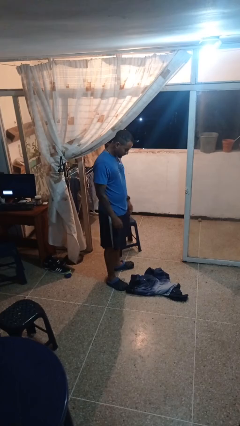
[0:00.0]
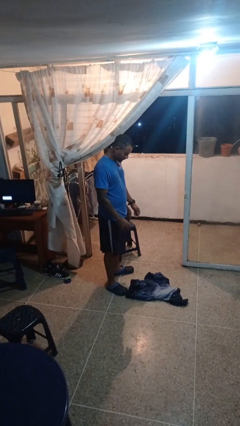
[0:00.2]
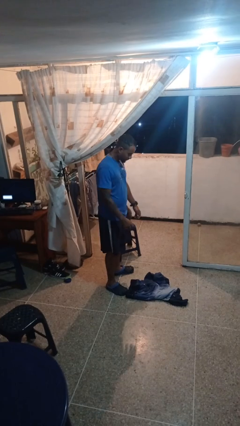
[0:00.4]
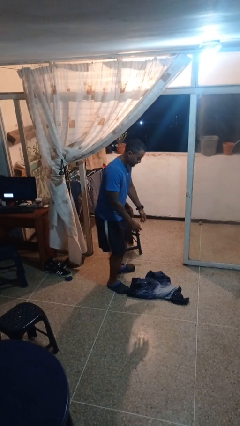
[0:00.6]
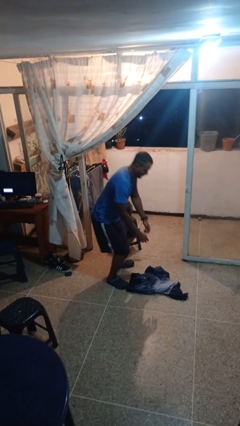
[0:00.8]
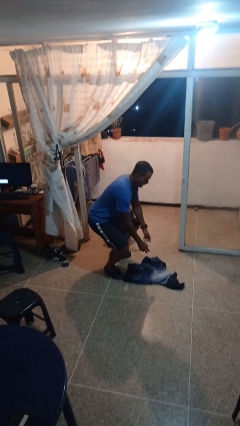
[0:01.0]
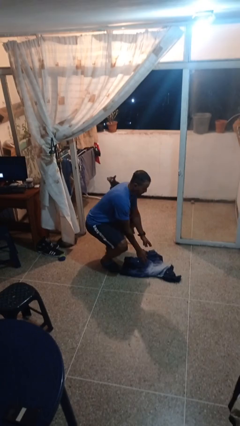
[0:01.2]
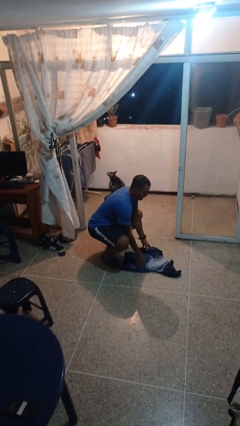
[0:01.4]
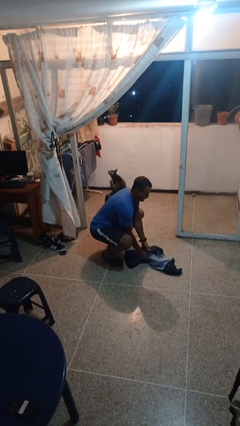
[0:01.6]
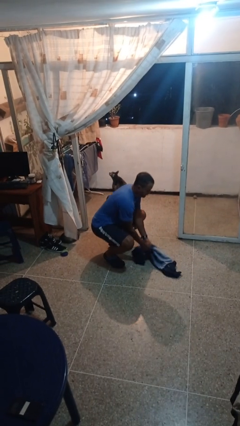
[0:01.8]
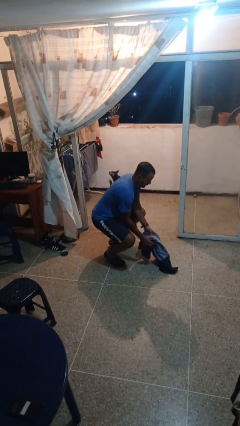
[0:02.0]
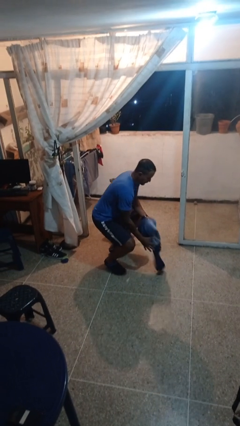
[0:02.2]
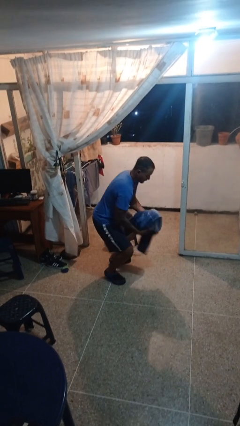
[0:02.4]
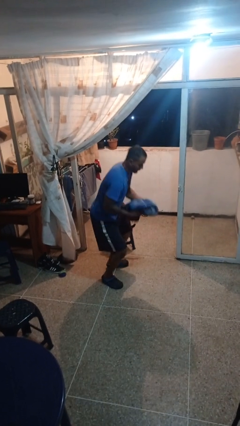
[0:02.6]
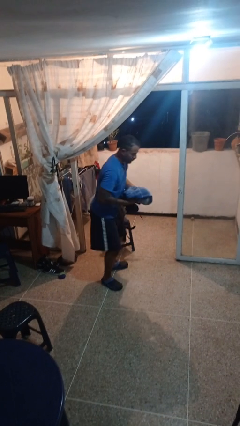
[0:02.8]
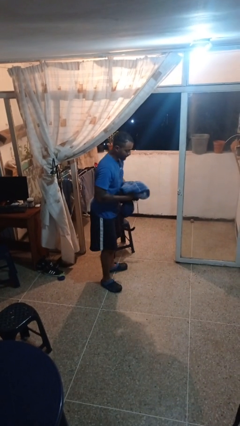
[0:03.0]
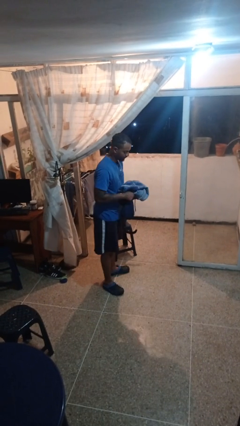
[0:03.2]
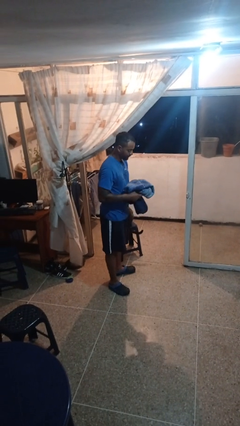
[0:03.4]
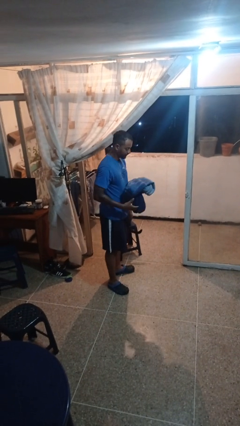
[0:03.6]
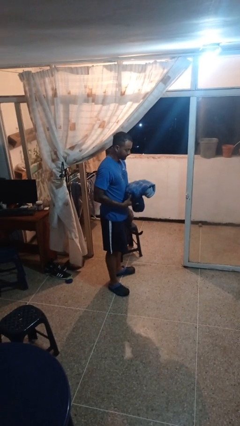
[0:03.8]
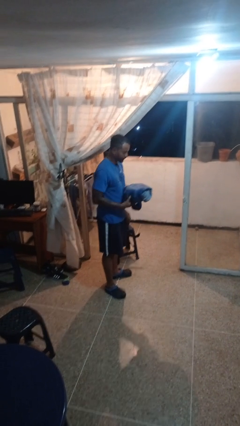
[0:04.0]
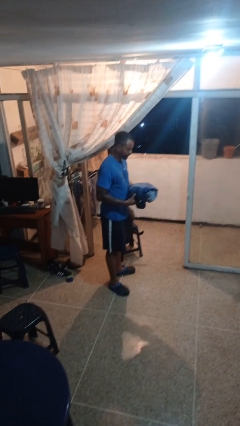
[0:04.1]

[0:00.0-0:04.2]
person picks up object from floor

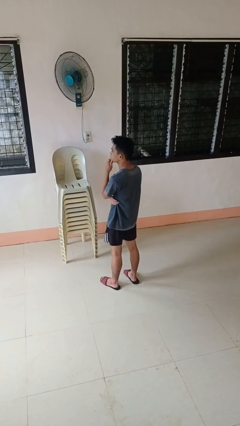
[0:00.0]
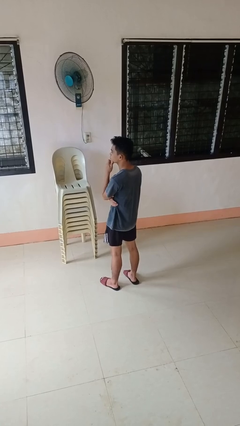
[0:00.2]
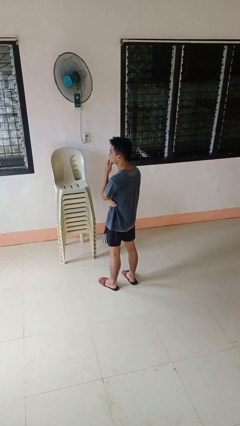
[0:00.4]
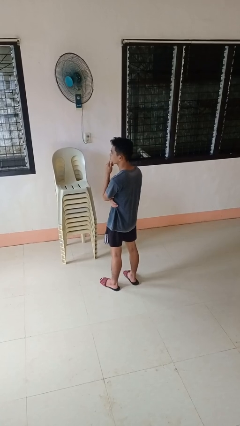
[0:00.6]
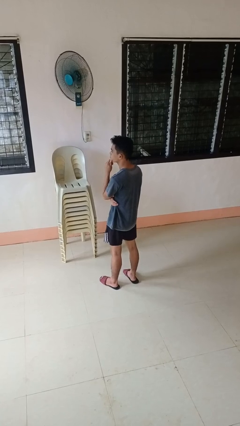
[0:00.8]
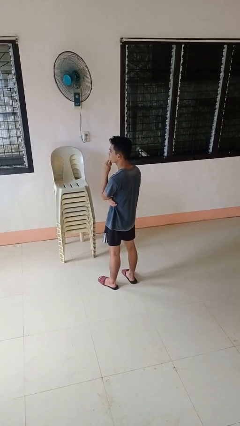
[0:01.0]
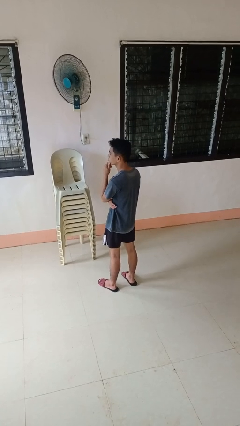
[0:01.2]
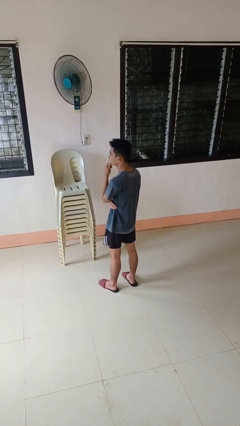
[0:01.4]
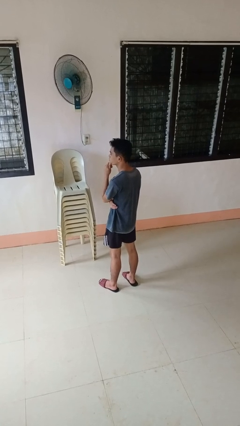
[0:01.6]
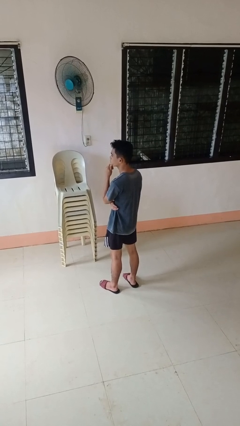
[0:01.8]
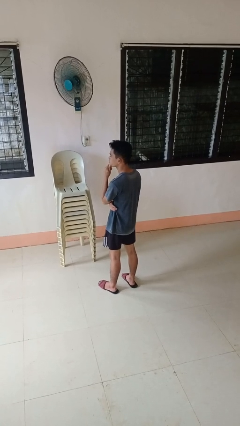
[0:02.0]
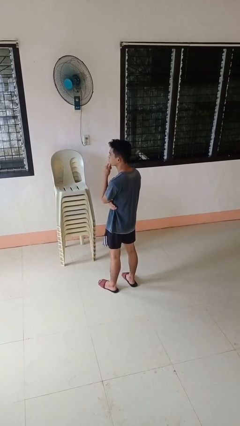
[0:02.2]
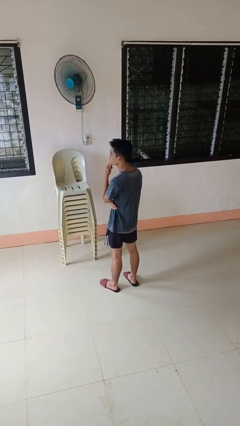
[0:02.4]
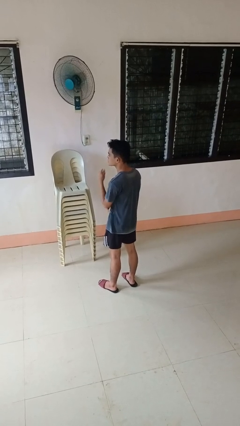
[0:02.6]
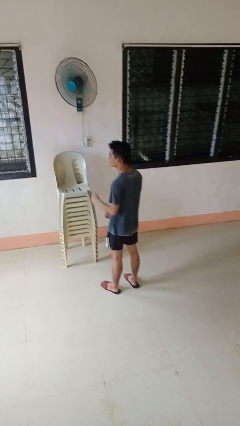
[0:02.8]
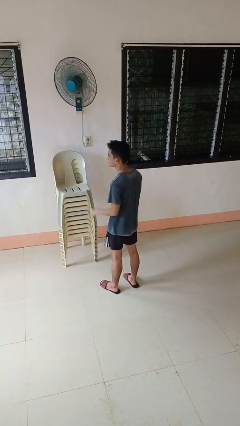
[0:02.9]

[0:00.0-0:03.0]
person strokes chin

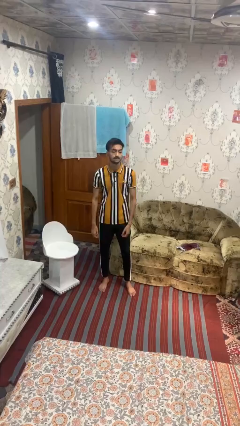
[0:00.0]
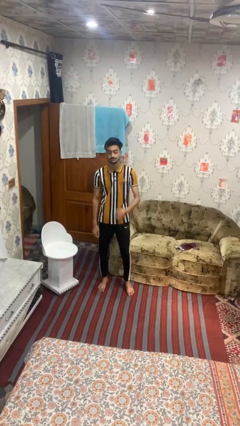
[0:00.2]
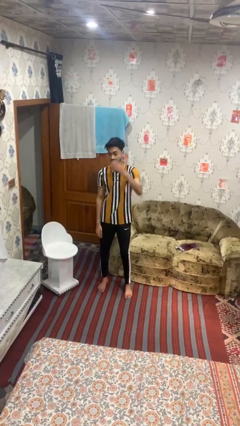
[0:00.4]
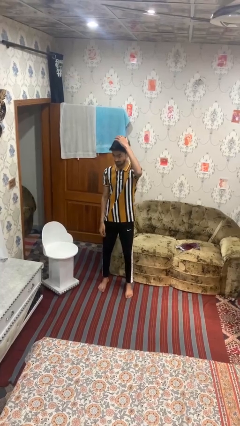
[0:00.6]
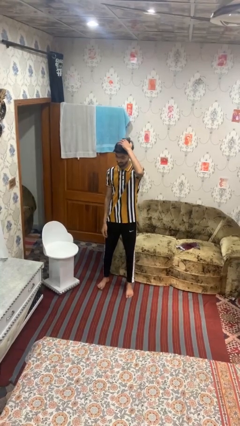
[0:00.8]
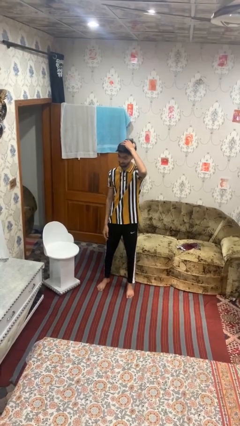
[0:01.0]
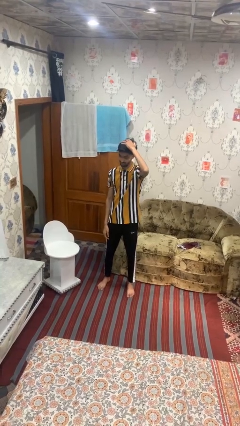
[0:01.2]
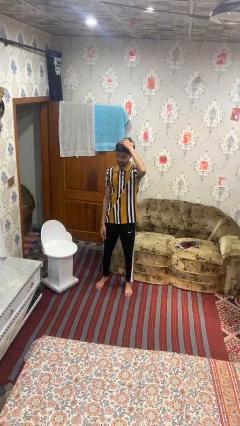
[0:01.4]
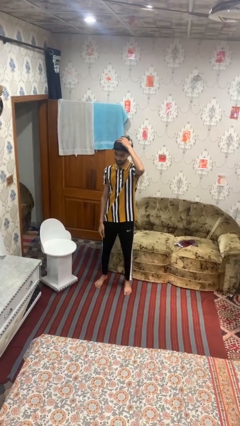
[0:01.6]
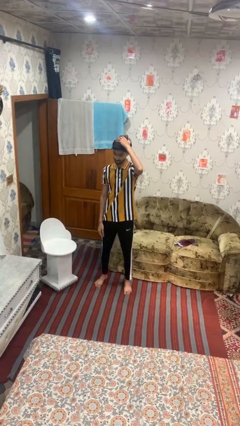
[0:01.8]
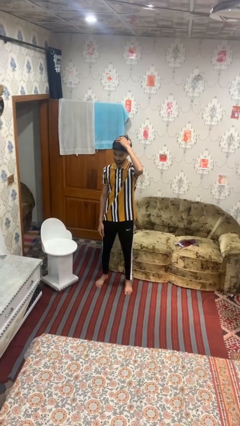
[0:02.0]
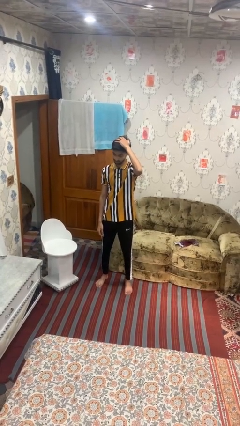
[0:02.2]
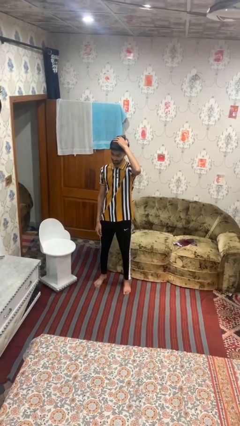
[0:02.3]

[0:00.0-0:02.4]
person pats head

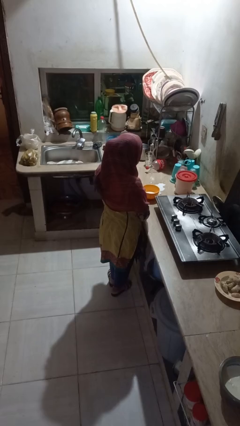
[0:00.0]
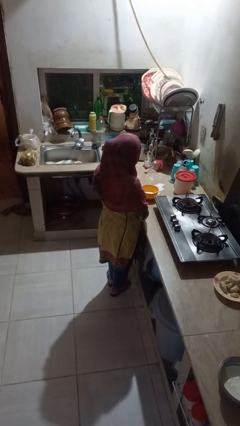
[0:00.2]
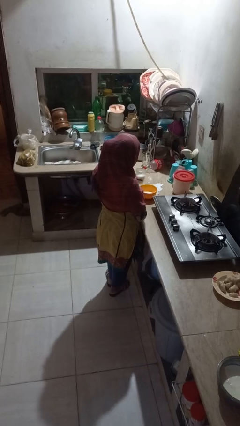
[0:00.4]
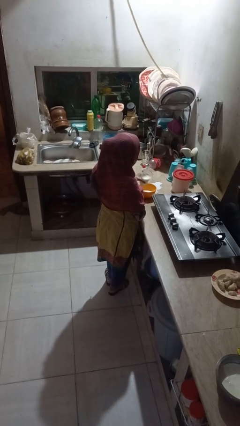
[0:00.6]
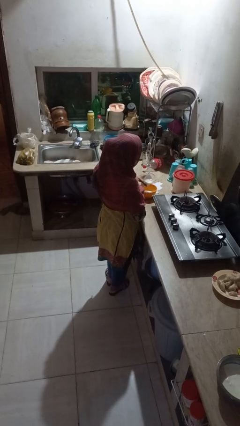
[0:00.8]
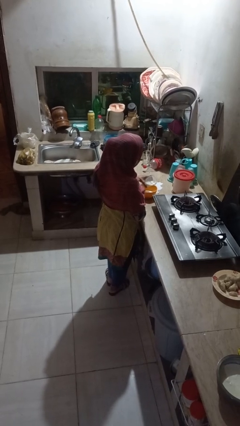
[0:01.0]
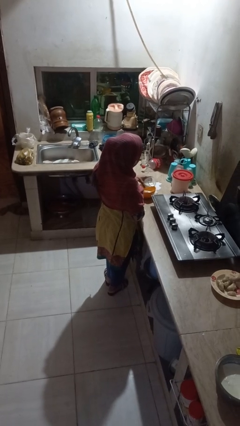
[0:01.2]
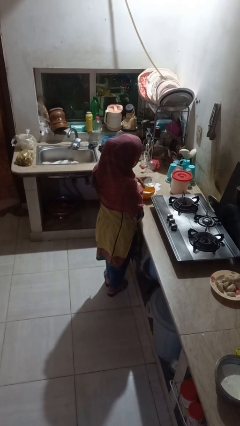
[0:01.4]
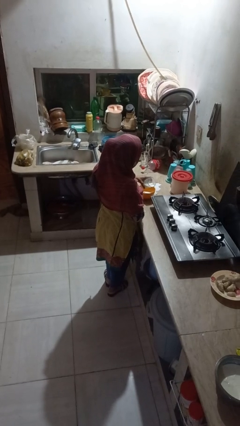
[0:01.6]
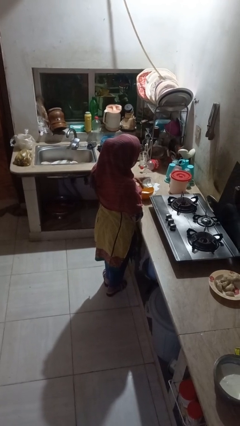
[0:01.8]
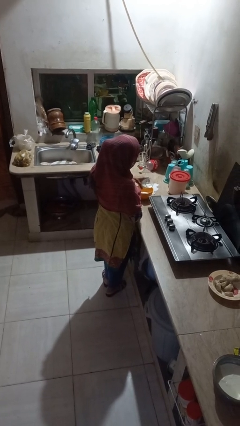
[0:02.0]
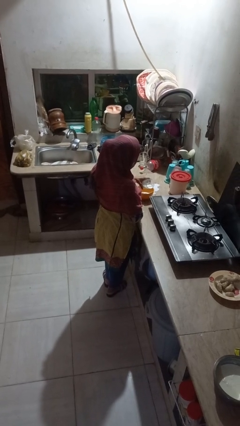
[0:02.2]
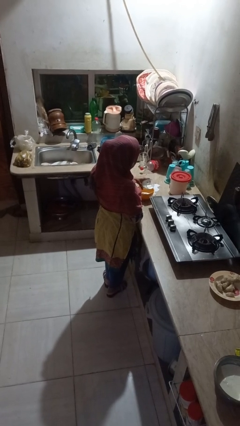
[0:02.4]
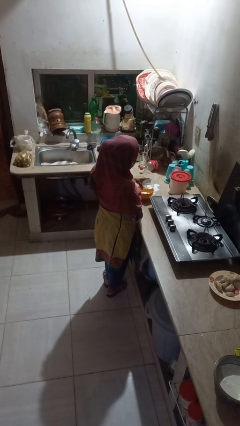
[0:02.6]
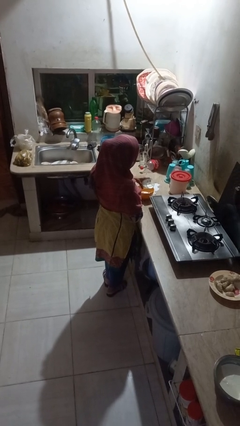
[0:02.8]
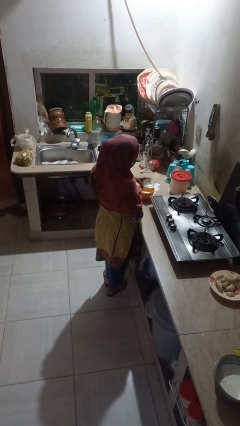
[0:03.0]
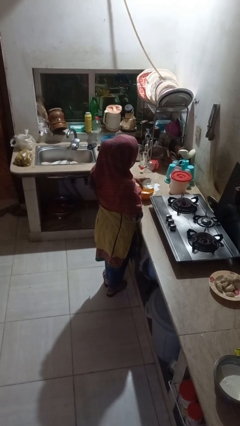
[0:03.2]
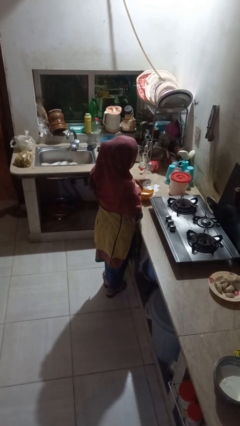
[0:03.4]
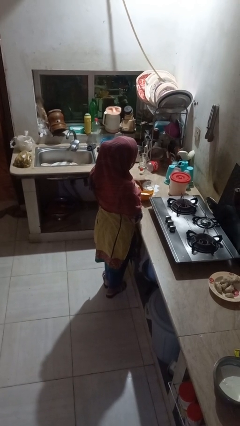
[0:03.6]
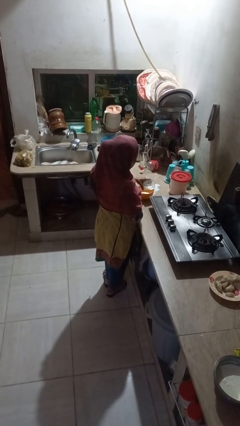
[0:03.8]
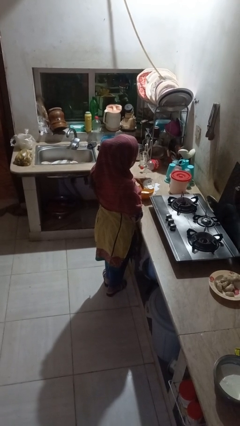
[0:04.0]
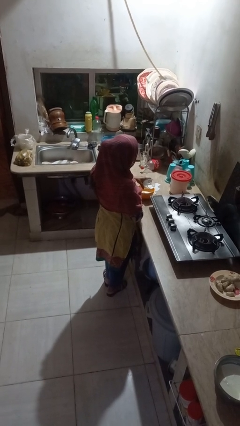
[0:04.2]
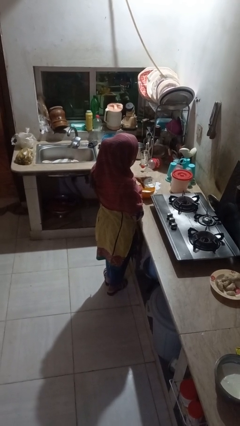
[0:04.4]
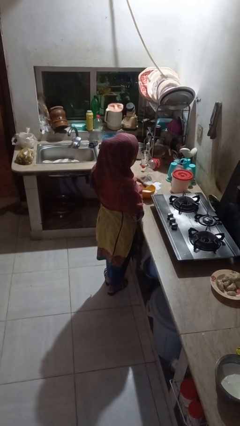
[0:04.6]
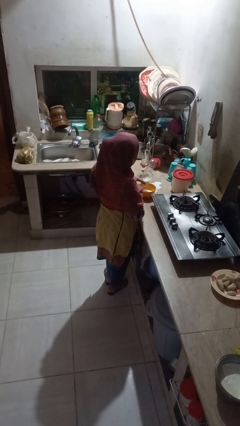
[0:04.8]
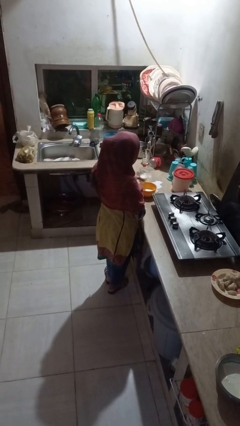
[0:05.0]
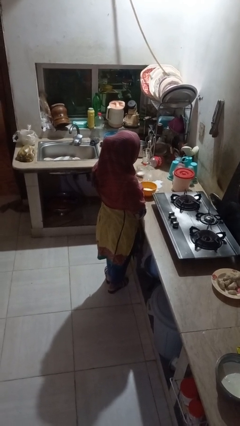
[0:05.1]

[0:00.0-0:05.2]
person pours into bowl

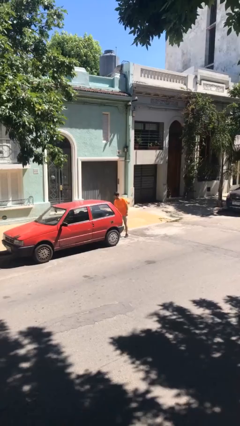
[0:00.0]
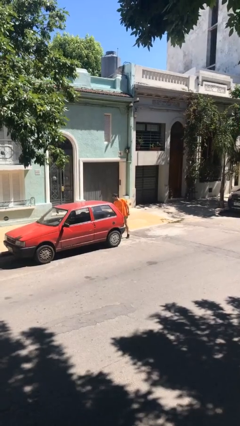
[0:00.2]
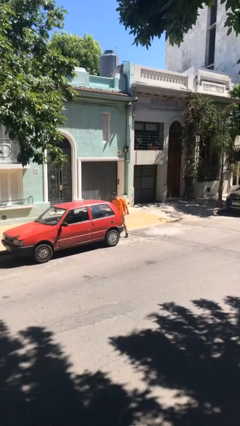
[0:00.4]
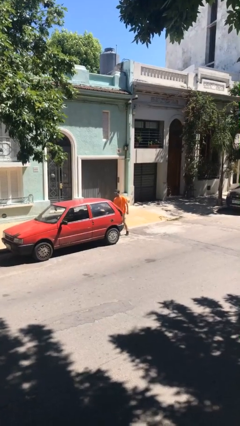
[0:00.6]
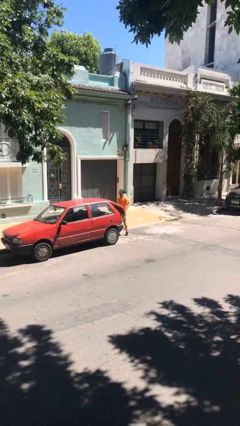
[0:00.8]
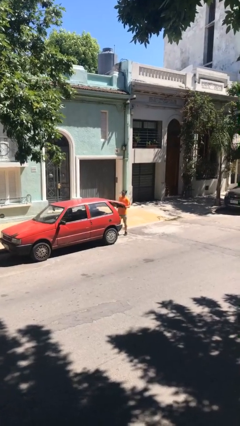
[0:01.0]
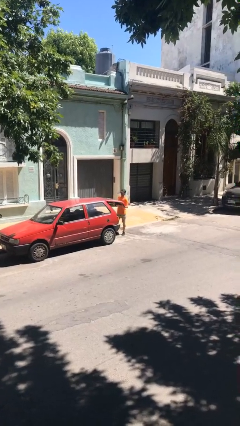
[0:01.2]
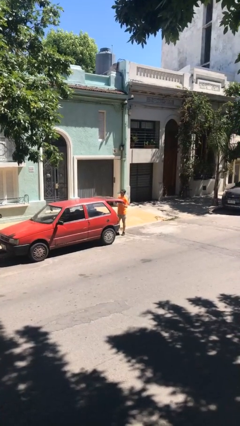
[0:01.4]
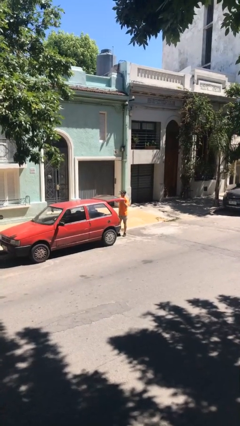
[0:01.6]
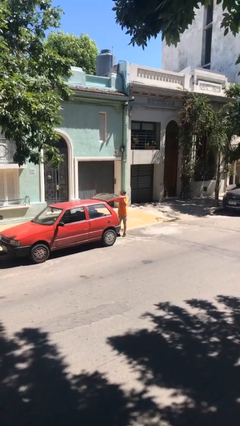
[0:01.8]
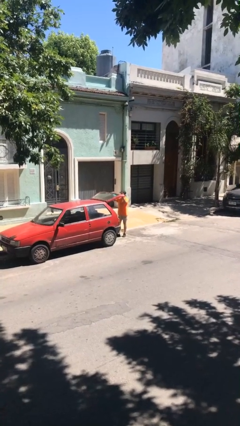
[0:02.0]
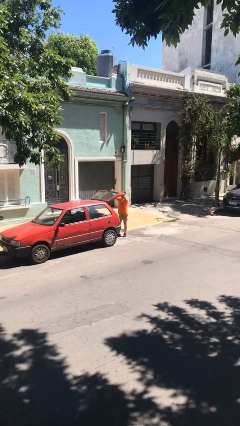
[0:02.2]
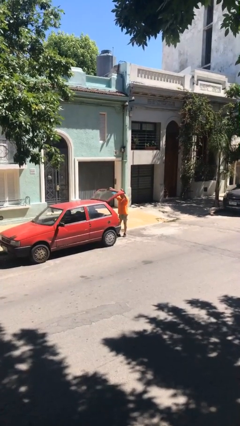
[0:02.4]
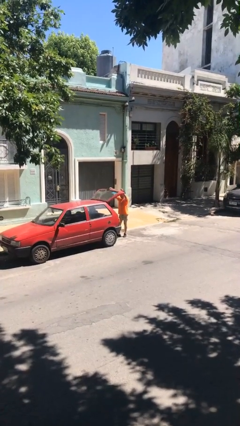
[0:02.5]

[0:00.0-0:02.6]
person opens car trunk

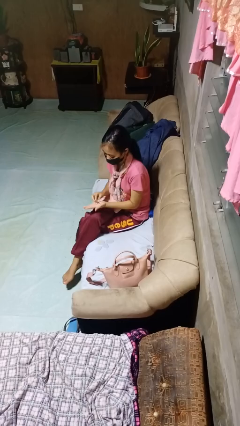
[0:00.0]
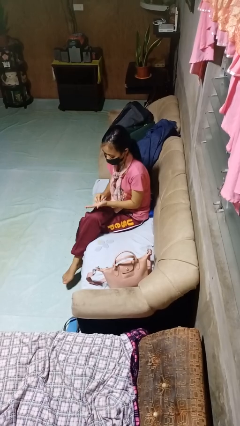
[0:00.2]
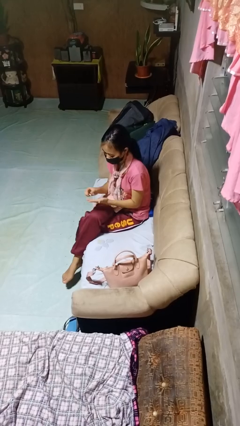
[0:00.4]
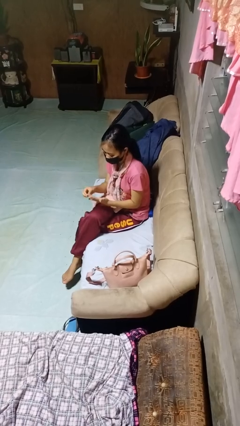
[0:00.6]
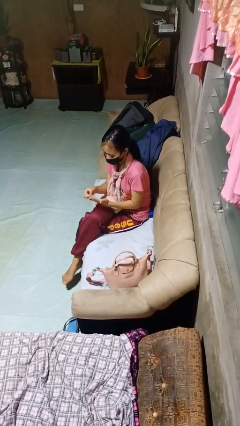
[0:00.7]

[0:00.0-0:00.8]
person puts on ring
